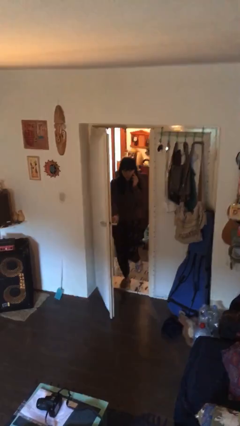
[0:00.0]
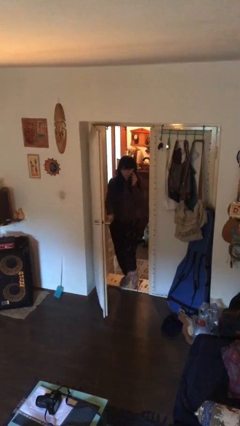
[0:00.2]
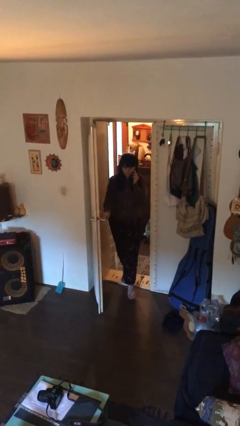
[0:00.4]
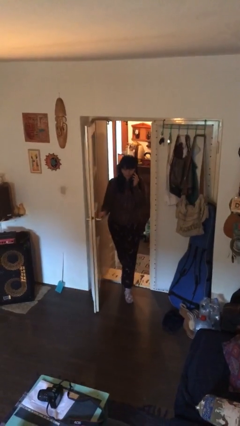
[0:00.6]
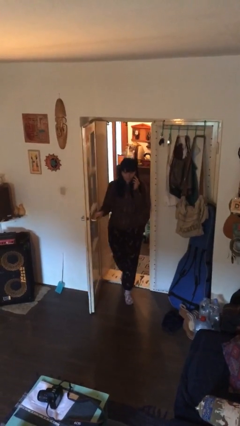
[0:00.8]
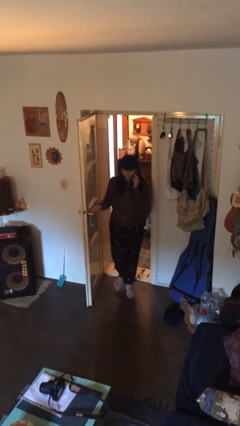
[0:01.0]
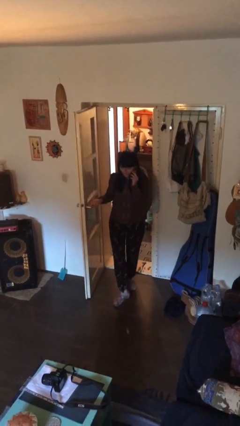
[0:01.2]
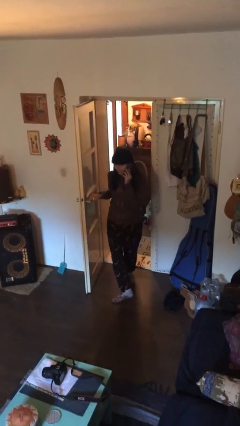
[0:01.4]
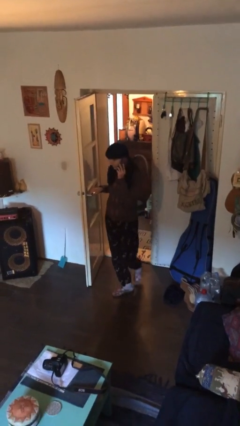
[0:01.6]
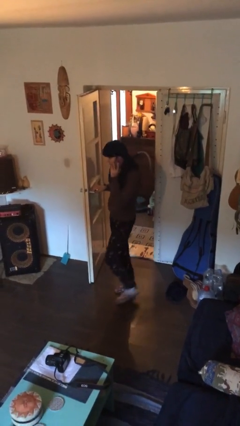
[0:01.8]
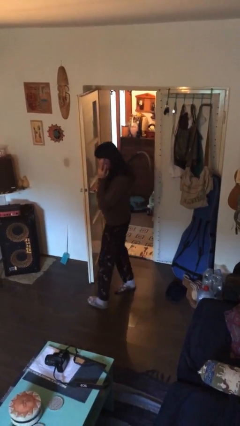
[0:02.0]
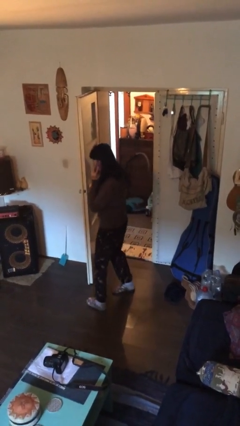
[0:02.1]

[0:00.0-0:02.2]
person enters scene through structure

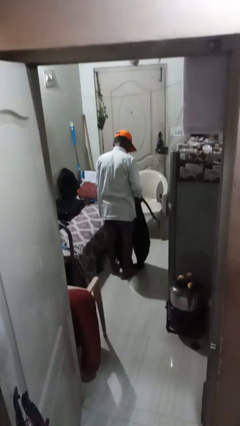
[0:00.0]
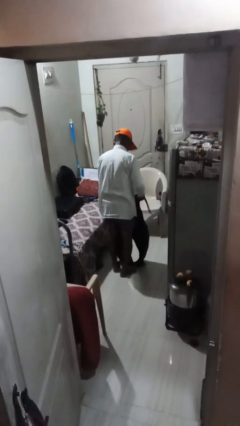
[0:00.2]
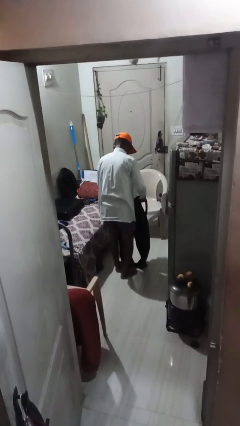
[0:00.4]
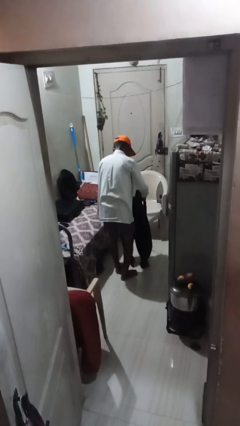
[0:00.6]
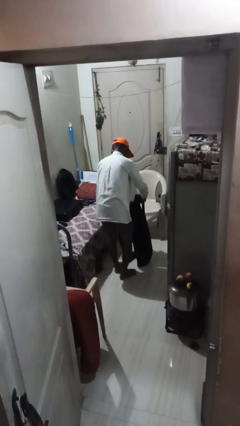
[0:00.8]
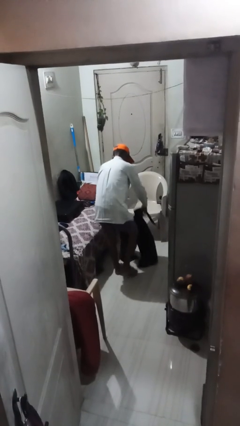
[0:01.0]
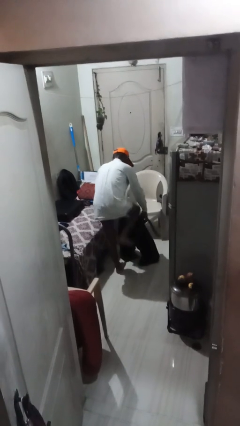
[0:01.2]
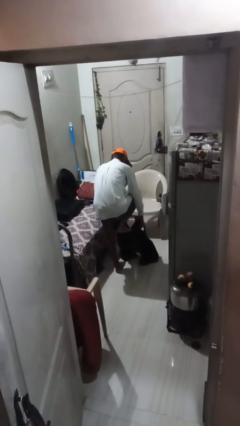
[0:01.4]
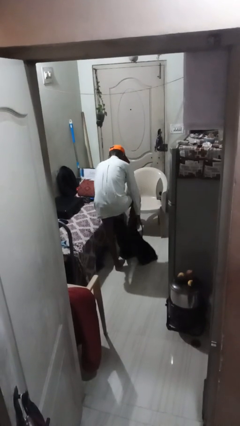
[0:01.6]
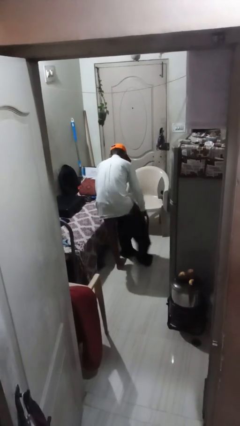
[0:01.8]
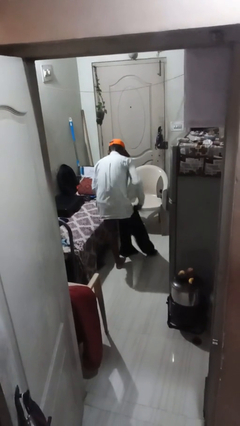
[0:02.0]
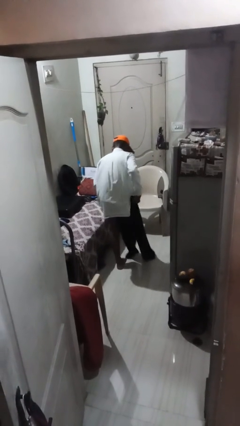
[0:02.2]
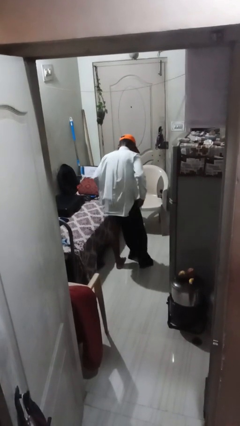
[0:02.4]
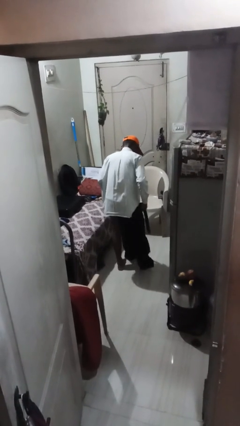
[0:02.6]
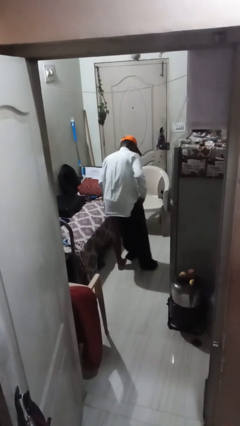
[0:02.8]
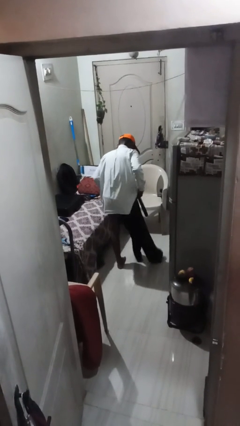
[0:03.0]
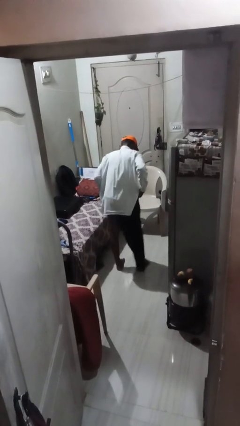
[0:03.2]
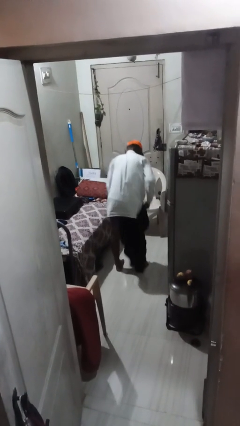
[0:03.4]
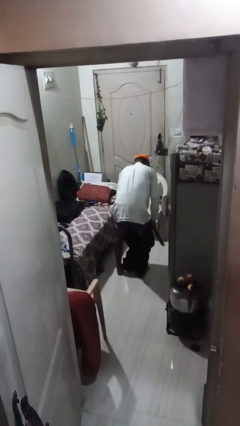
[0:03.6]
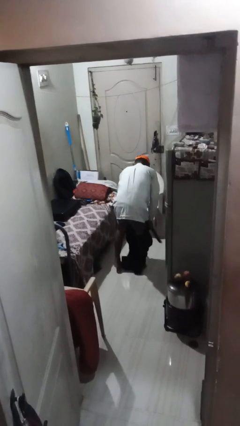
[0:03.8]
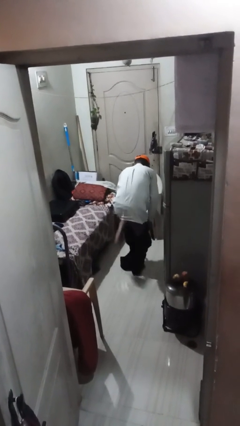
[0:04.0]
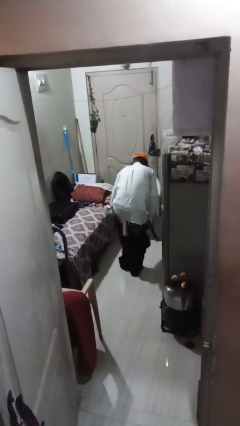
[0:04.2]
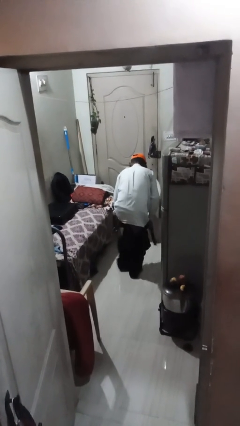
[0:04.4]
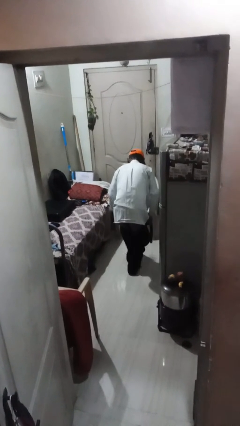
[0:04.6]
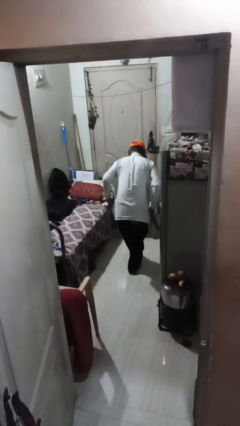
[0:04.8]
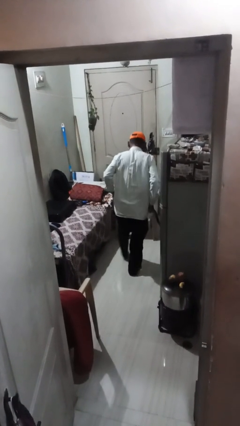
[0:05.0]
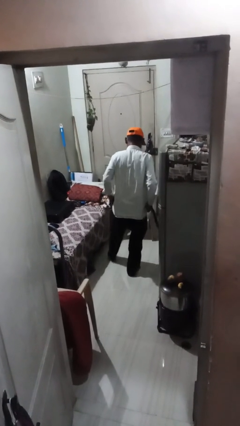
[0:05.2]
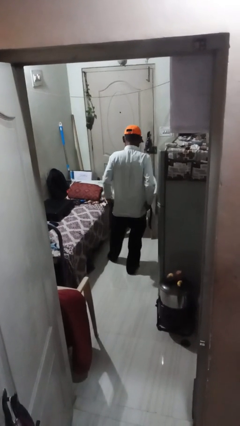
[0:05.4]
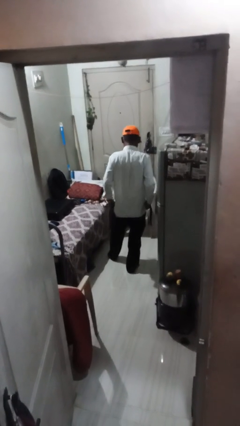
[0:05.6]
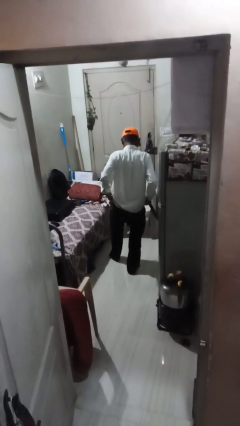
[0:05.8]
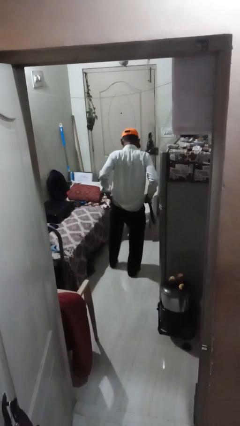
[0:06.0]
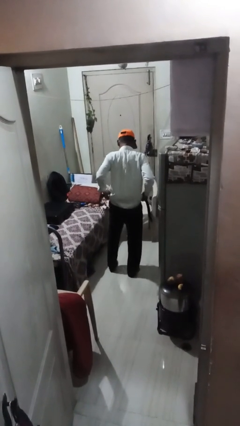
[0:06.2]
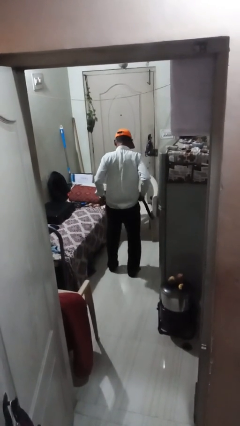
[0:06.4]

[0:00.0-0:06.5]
person puts on pants

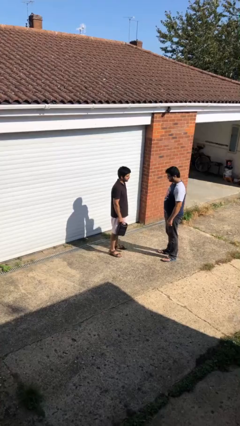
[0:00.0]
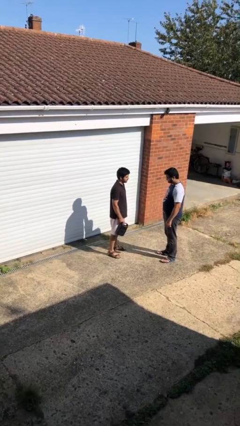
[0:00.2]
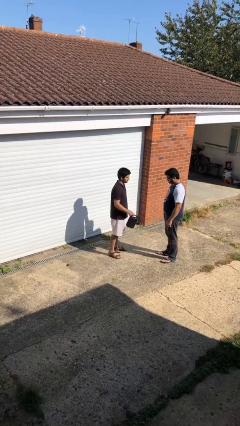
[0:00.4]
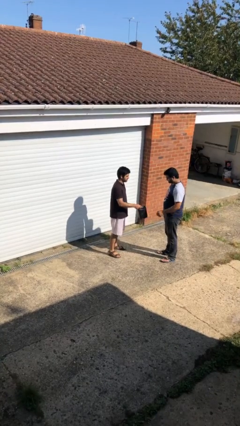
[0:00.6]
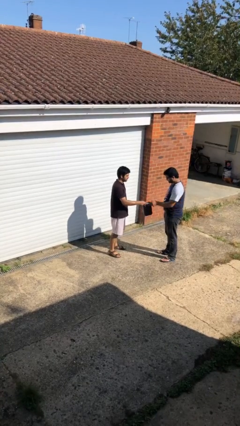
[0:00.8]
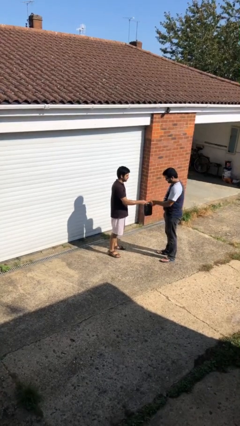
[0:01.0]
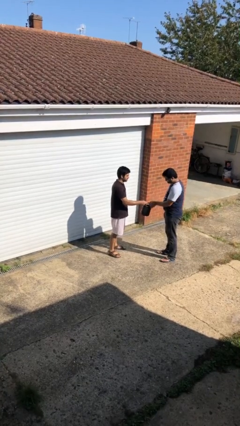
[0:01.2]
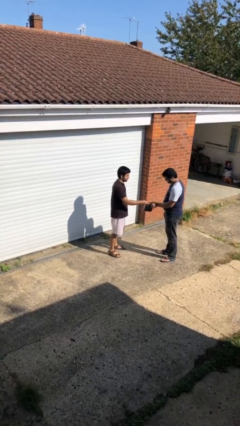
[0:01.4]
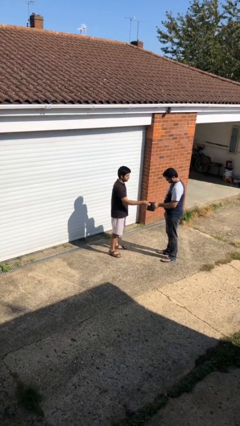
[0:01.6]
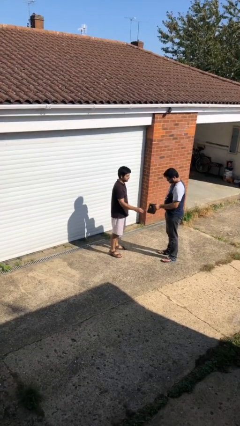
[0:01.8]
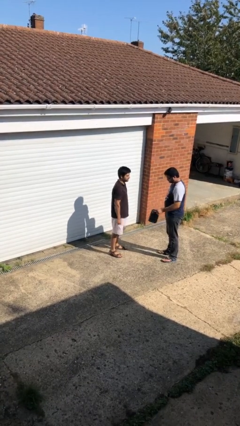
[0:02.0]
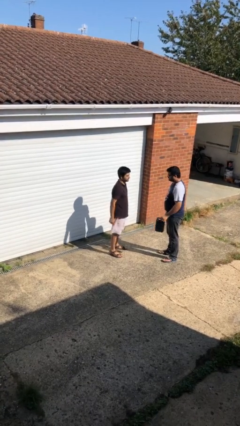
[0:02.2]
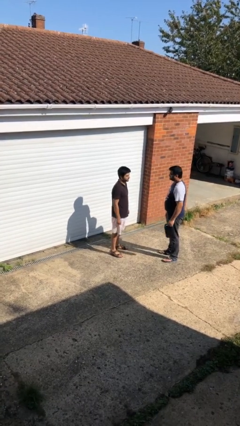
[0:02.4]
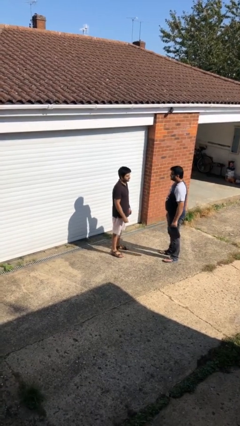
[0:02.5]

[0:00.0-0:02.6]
person transfers object to person

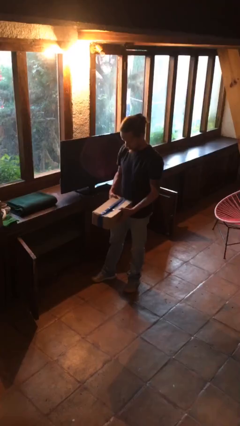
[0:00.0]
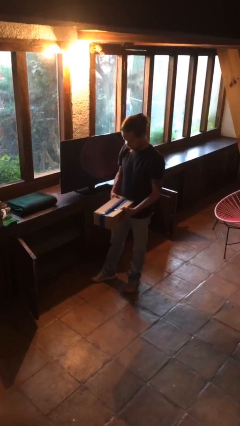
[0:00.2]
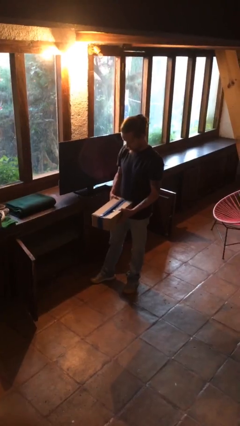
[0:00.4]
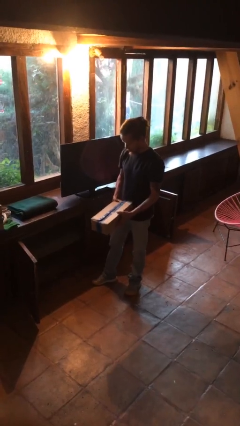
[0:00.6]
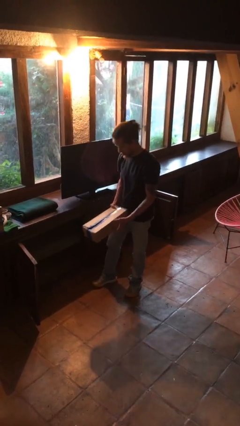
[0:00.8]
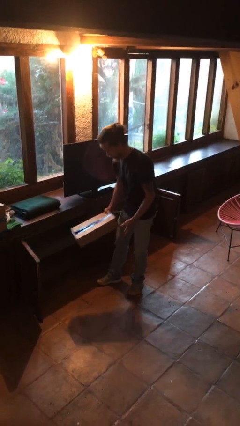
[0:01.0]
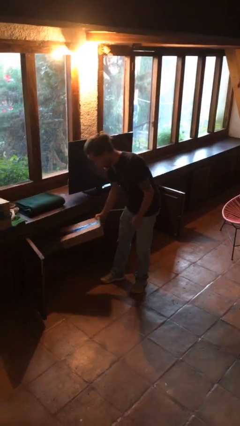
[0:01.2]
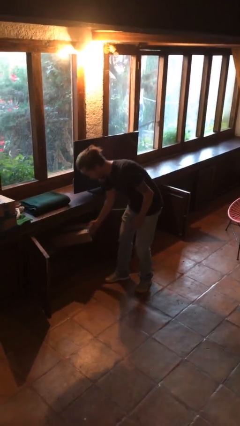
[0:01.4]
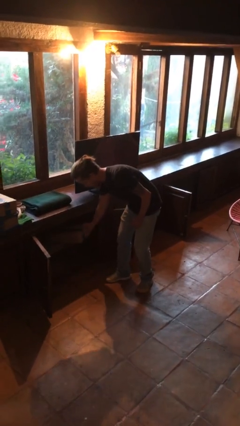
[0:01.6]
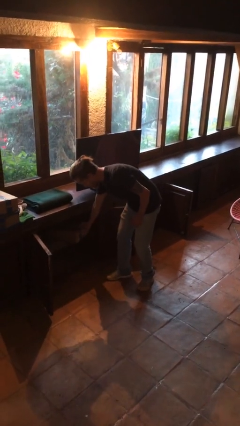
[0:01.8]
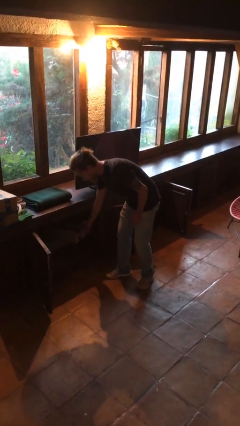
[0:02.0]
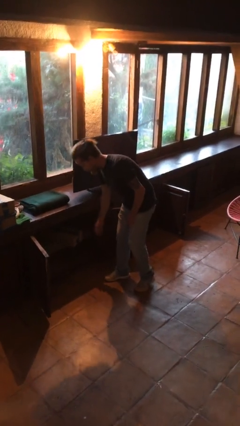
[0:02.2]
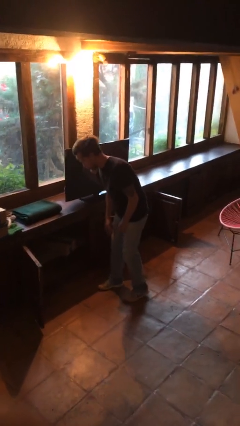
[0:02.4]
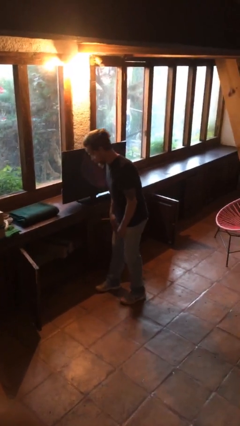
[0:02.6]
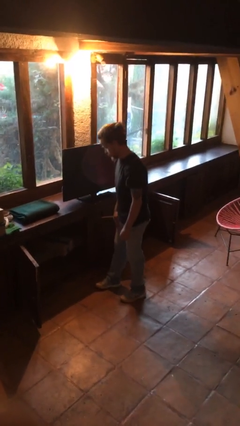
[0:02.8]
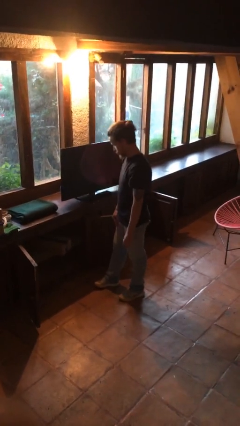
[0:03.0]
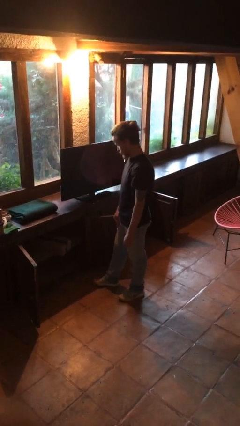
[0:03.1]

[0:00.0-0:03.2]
person puts down object into cabinet

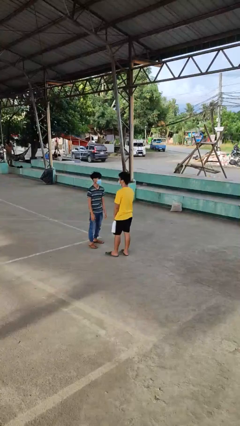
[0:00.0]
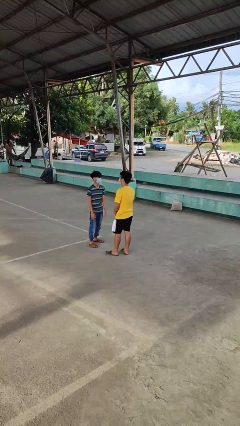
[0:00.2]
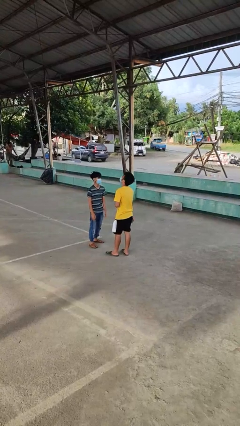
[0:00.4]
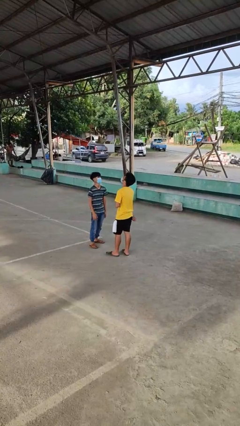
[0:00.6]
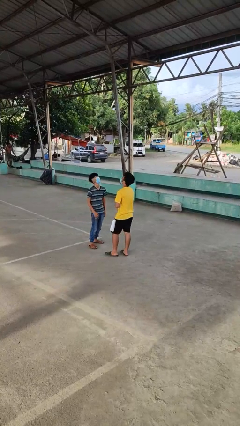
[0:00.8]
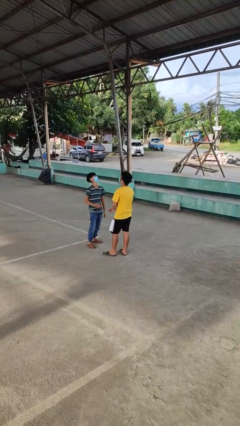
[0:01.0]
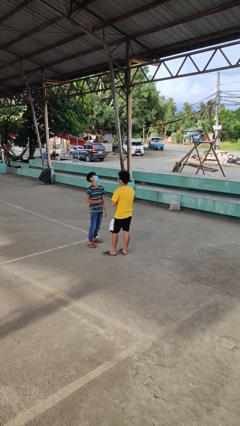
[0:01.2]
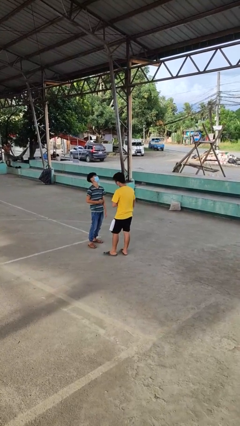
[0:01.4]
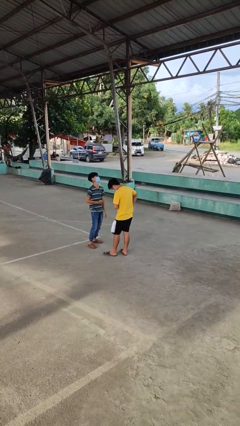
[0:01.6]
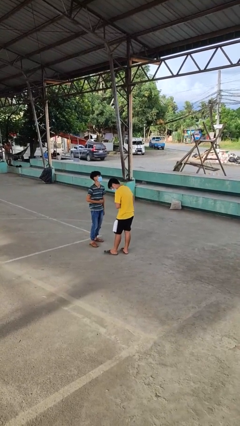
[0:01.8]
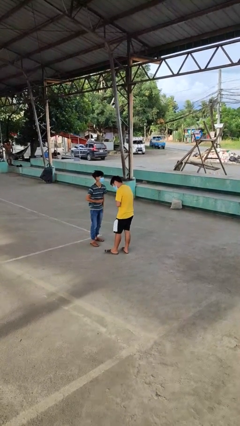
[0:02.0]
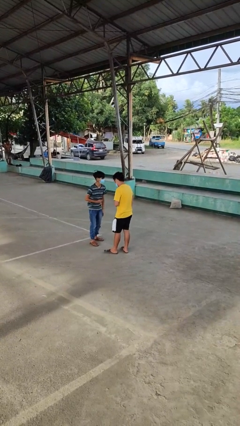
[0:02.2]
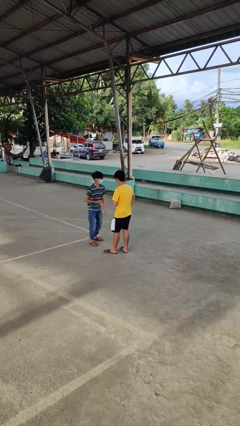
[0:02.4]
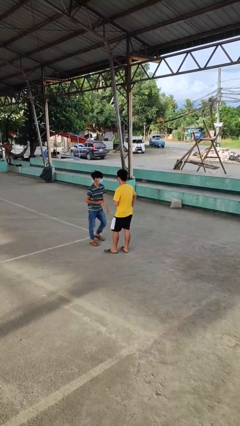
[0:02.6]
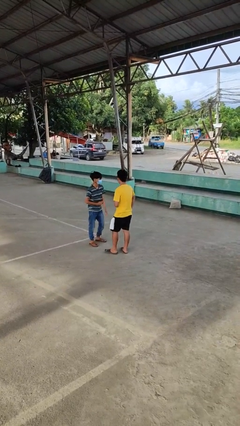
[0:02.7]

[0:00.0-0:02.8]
person laughs with person

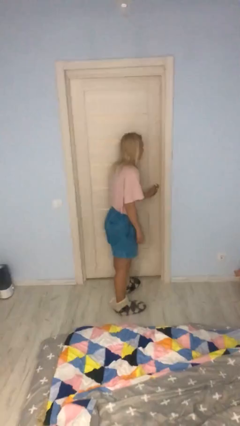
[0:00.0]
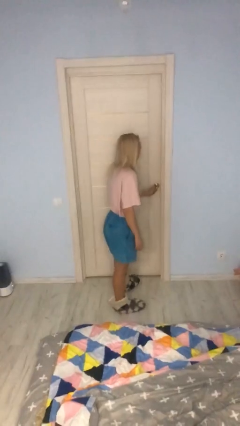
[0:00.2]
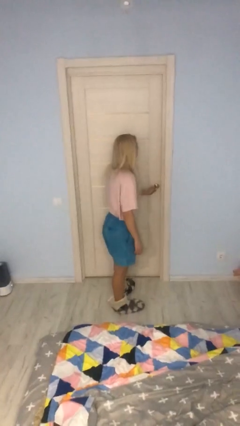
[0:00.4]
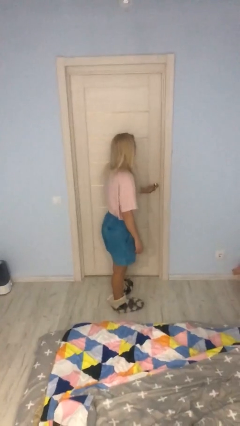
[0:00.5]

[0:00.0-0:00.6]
person closes facility door
